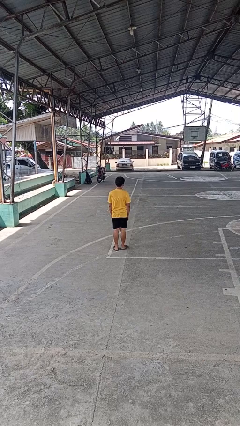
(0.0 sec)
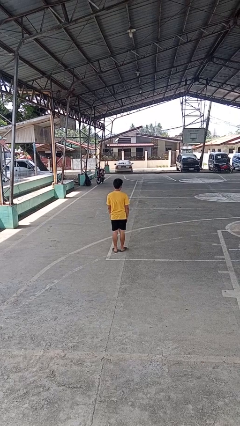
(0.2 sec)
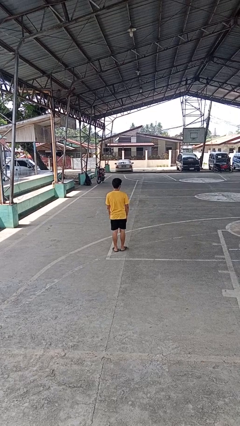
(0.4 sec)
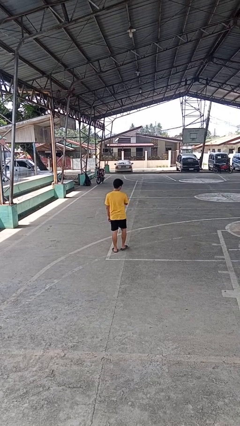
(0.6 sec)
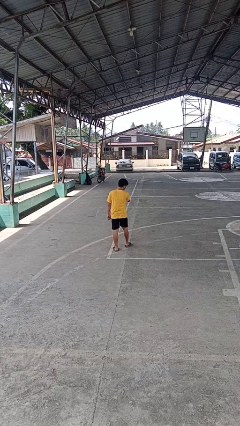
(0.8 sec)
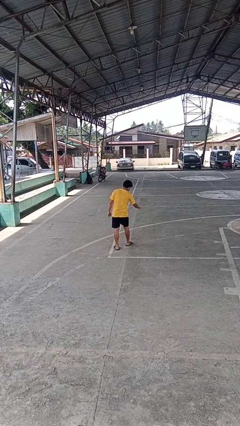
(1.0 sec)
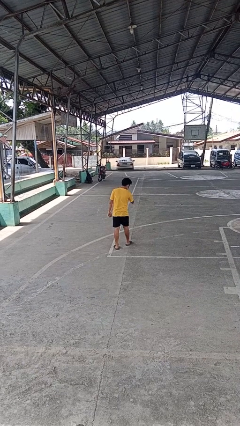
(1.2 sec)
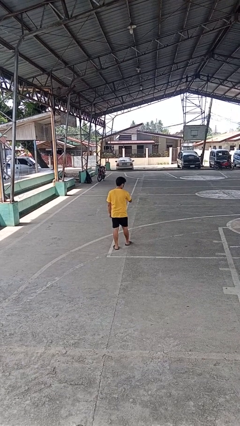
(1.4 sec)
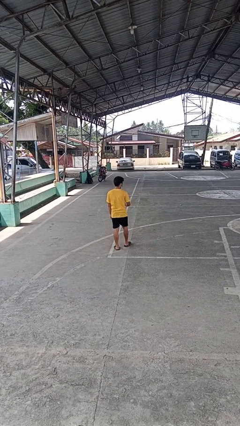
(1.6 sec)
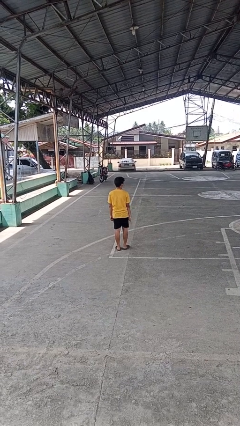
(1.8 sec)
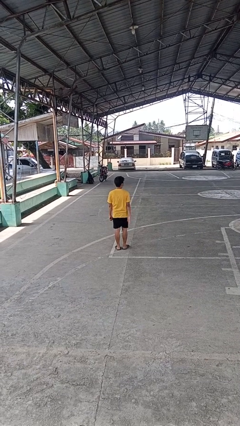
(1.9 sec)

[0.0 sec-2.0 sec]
person karate chop

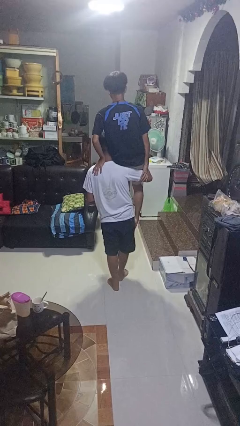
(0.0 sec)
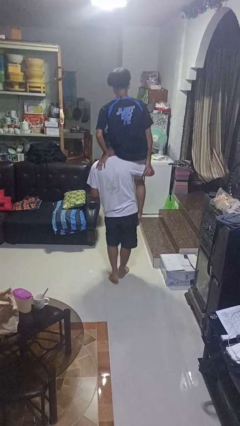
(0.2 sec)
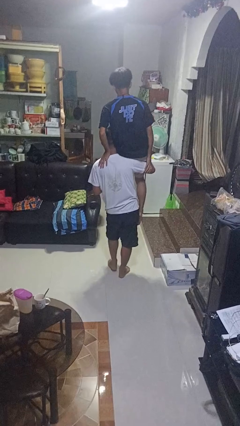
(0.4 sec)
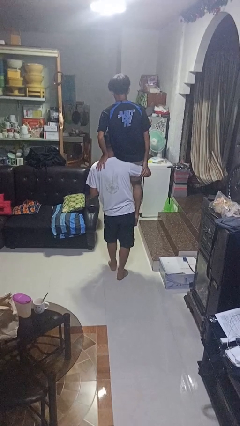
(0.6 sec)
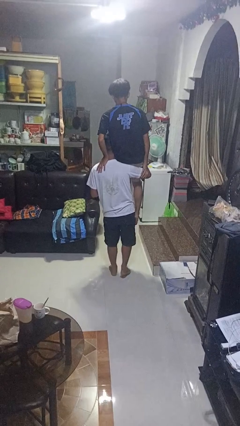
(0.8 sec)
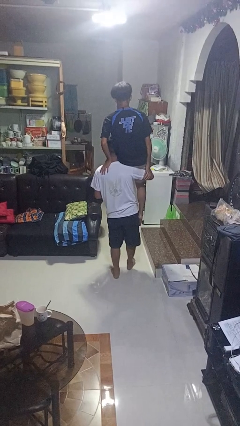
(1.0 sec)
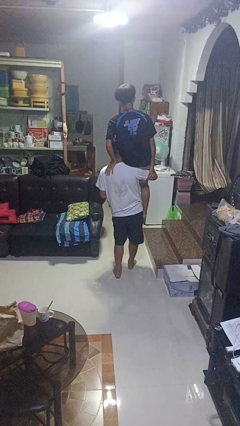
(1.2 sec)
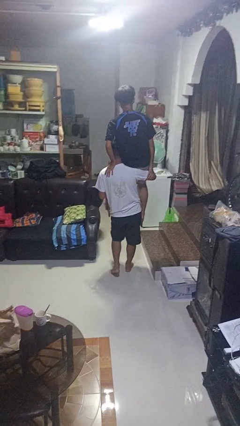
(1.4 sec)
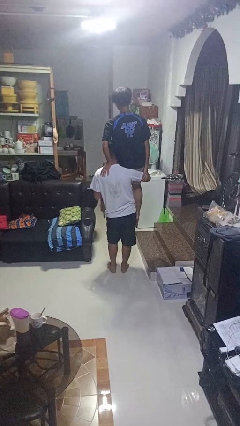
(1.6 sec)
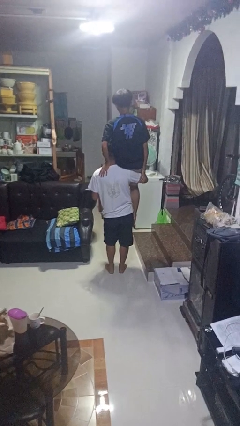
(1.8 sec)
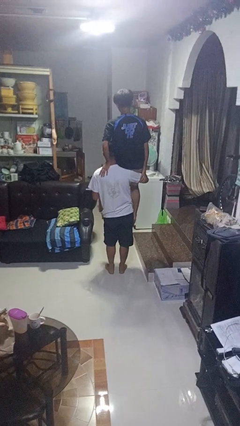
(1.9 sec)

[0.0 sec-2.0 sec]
person carries person on shoulders

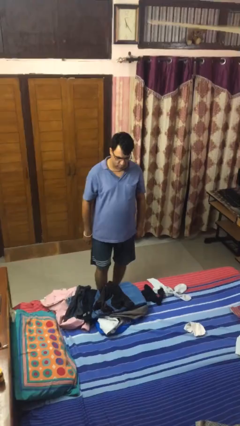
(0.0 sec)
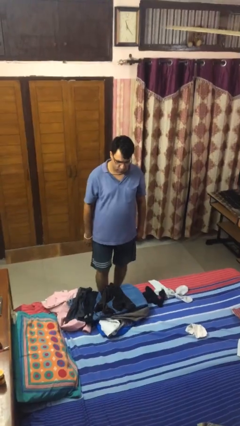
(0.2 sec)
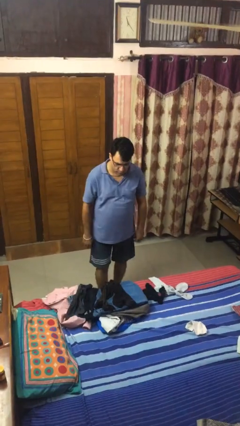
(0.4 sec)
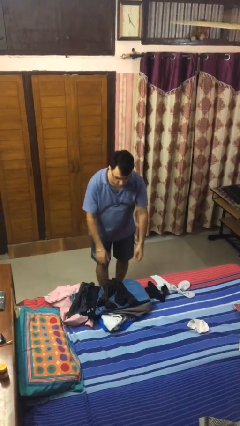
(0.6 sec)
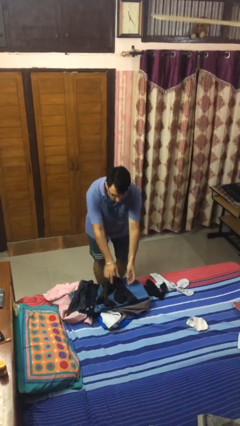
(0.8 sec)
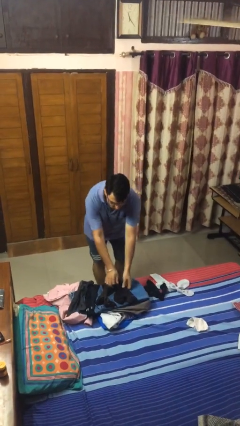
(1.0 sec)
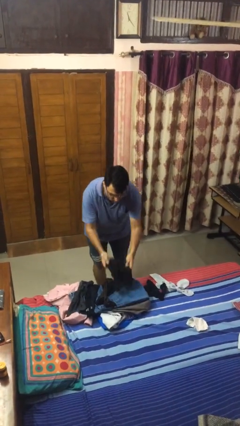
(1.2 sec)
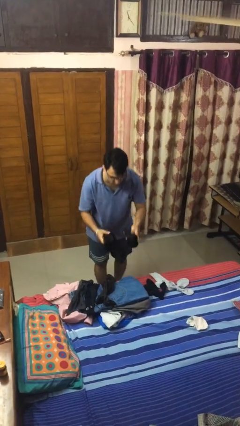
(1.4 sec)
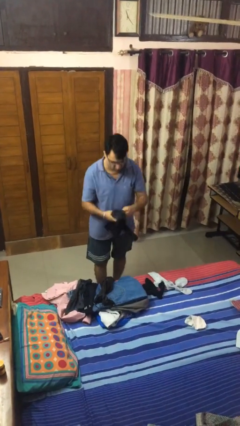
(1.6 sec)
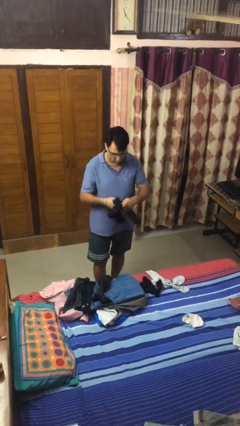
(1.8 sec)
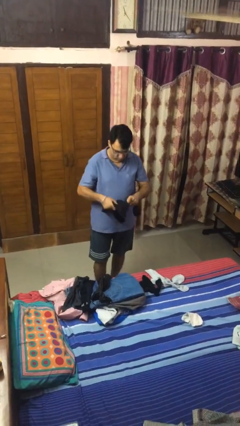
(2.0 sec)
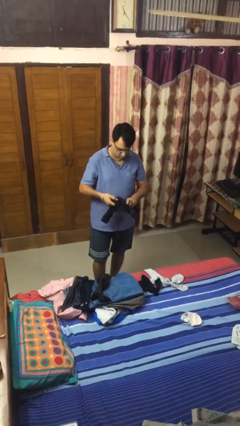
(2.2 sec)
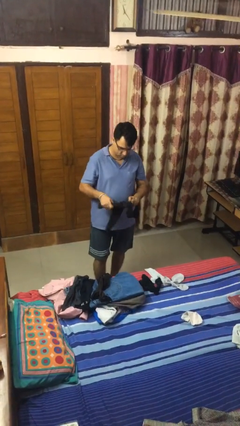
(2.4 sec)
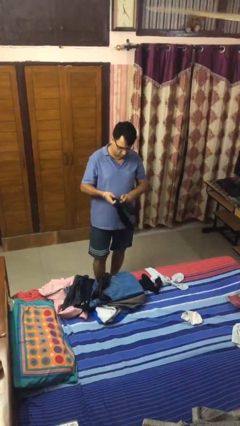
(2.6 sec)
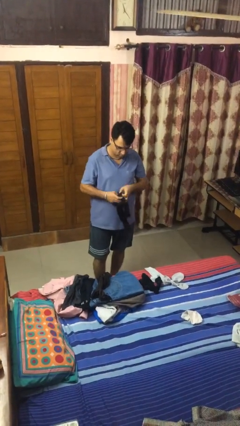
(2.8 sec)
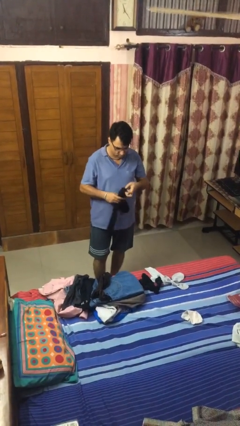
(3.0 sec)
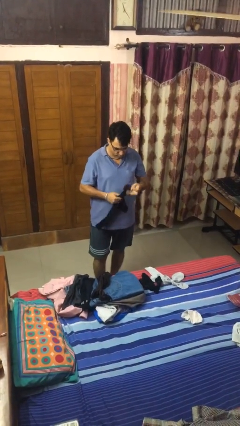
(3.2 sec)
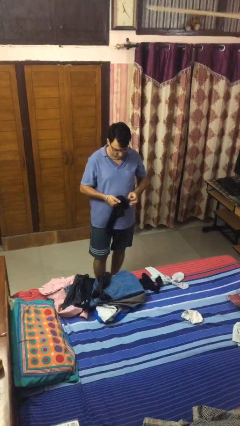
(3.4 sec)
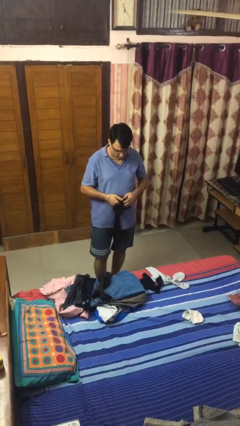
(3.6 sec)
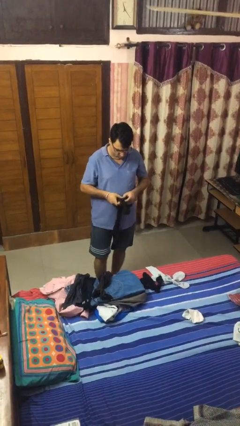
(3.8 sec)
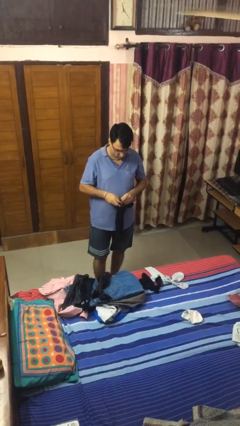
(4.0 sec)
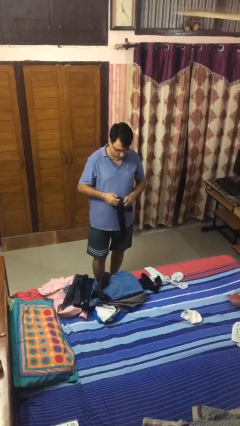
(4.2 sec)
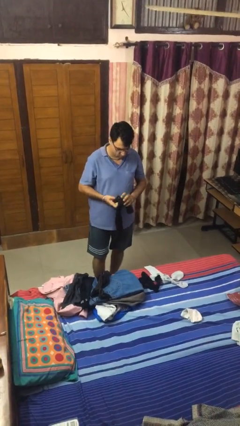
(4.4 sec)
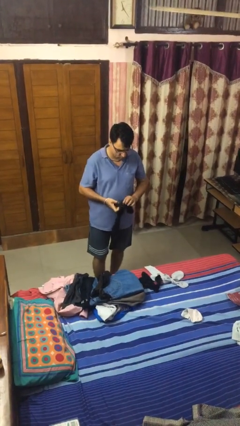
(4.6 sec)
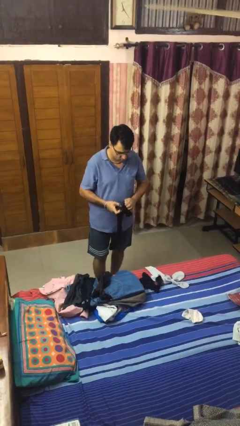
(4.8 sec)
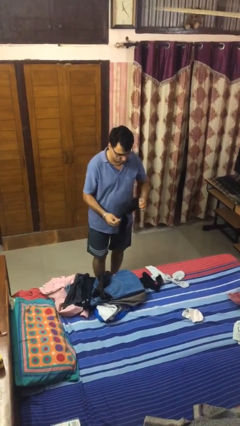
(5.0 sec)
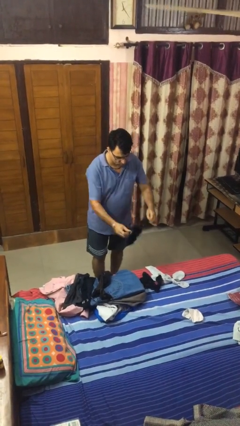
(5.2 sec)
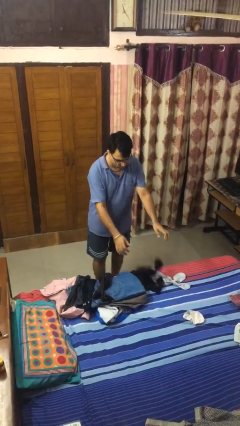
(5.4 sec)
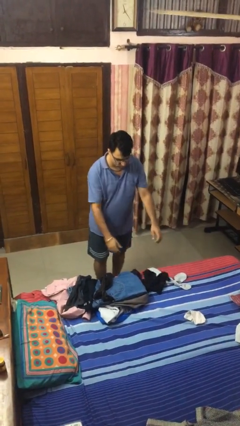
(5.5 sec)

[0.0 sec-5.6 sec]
person folds socks

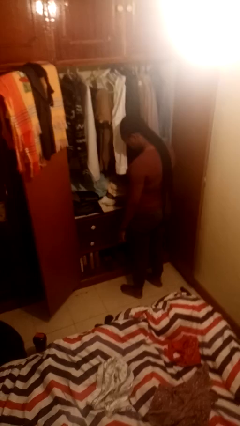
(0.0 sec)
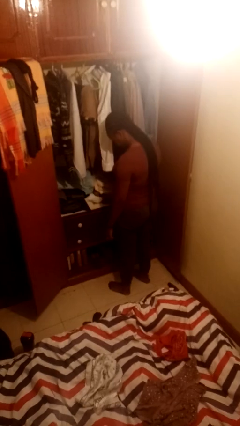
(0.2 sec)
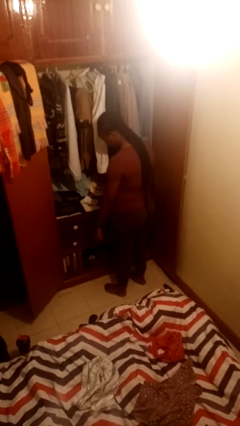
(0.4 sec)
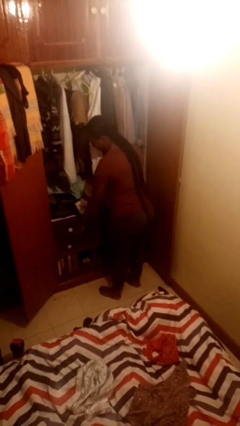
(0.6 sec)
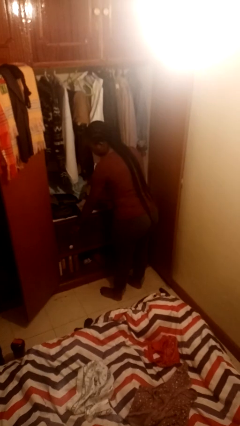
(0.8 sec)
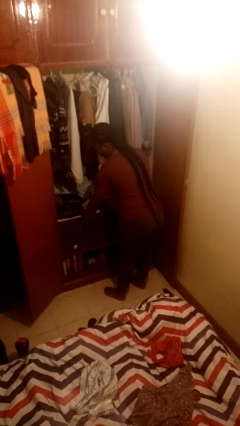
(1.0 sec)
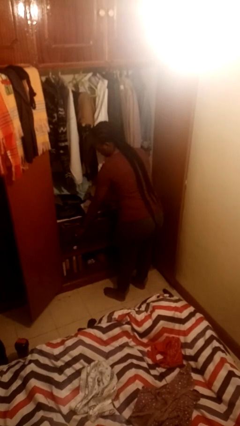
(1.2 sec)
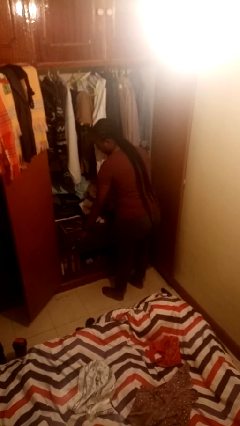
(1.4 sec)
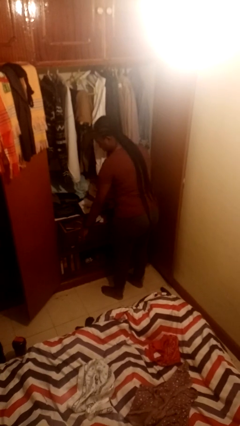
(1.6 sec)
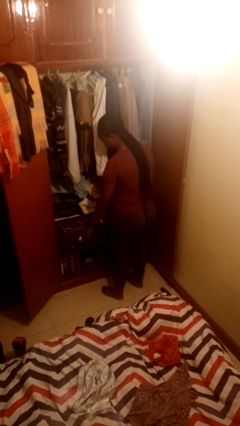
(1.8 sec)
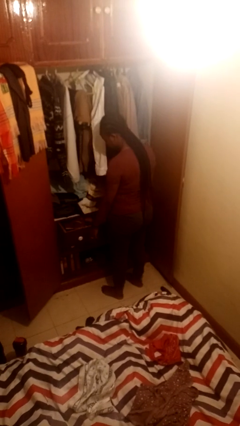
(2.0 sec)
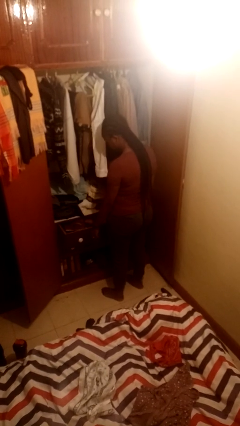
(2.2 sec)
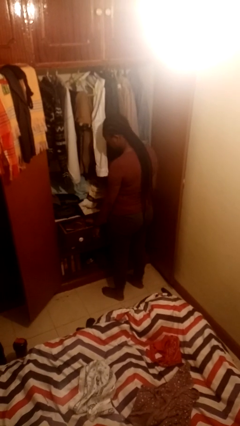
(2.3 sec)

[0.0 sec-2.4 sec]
person opens dresser drawer

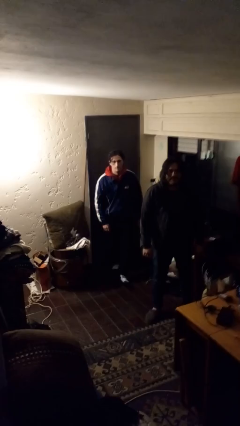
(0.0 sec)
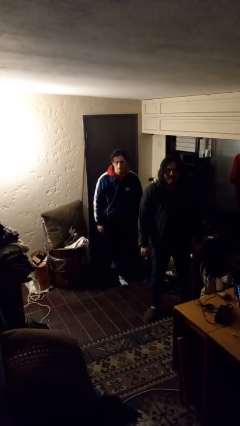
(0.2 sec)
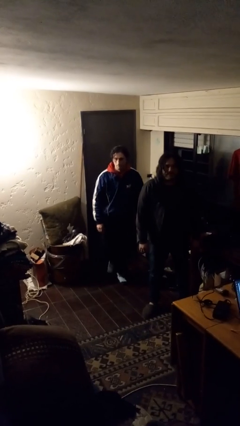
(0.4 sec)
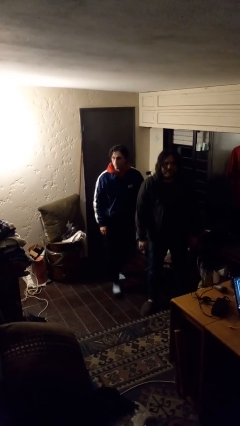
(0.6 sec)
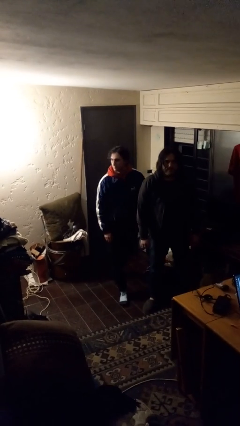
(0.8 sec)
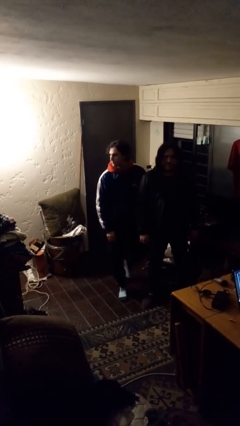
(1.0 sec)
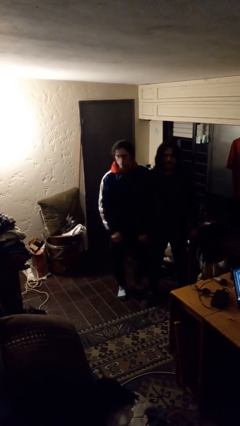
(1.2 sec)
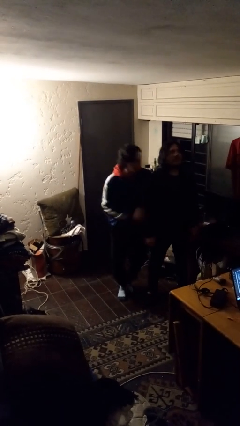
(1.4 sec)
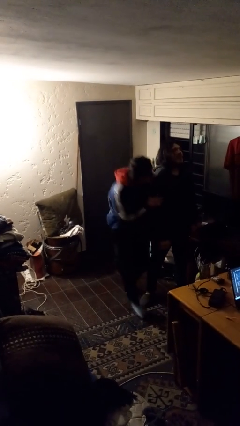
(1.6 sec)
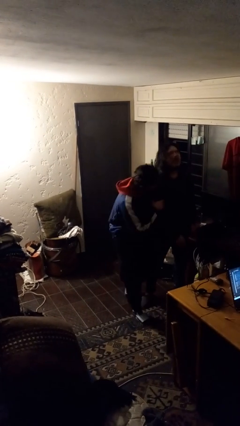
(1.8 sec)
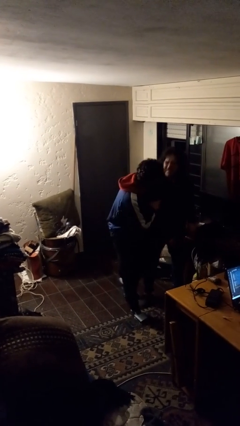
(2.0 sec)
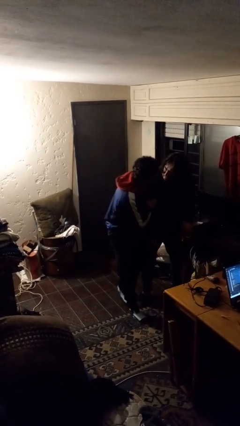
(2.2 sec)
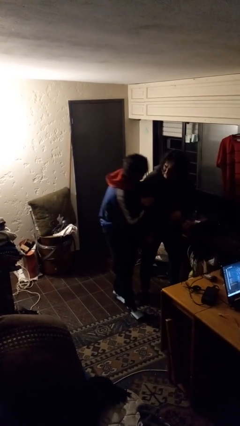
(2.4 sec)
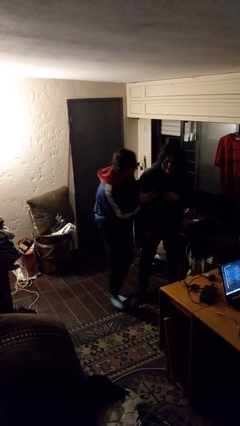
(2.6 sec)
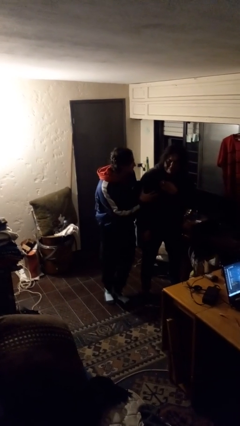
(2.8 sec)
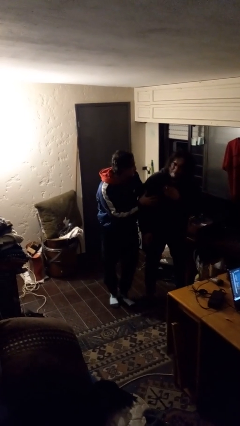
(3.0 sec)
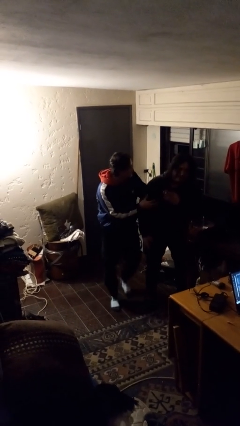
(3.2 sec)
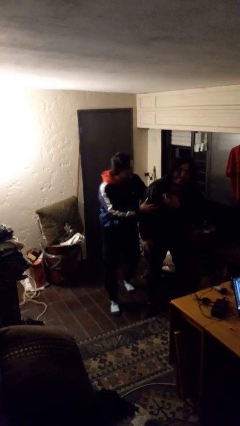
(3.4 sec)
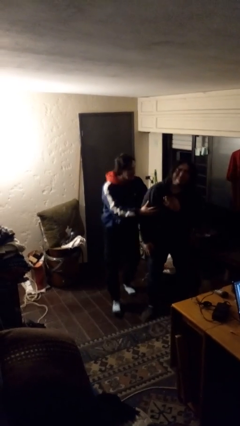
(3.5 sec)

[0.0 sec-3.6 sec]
person bumps into person

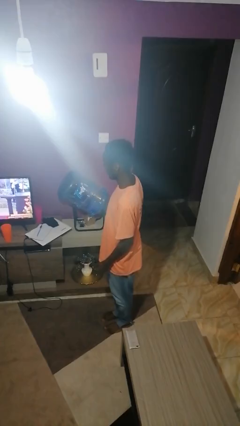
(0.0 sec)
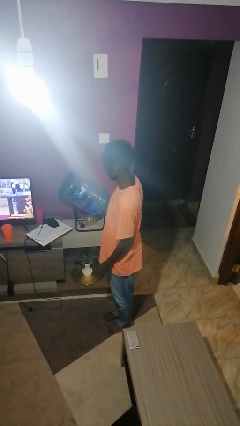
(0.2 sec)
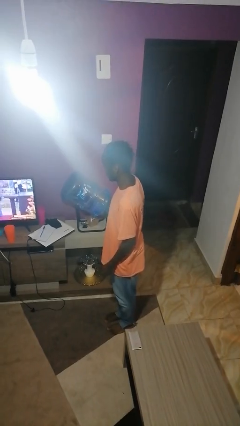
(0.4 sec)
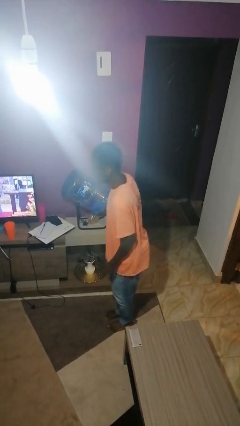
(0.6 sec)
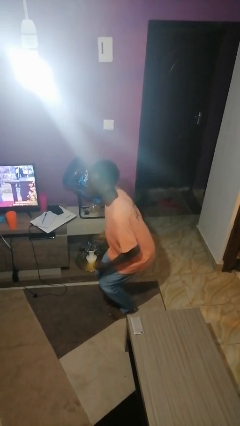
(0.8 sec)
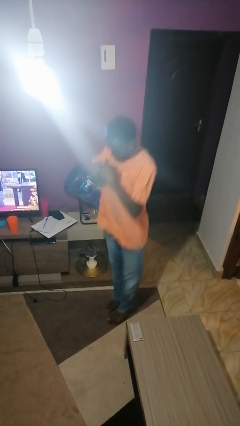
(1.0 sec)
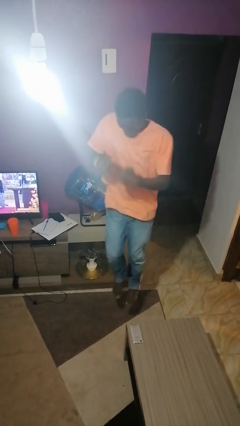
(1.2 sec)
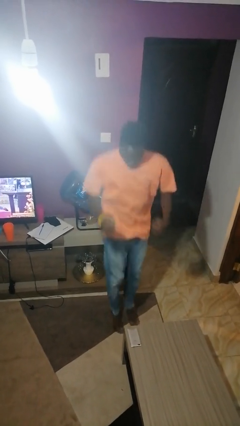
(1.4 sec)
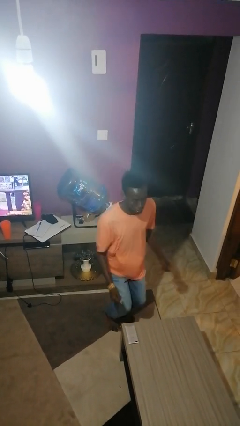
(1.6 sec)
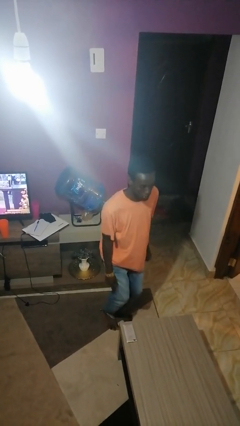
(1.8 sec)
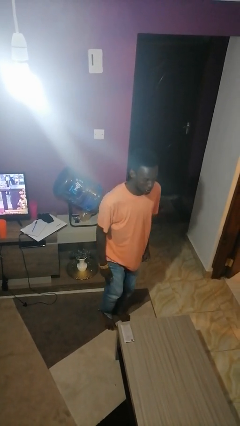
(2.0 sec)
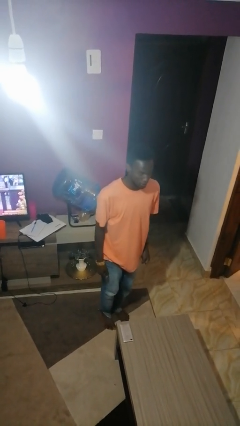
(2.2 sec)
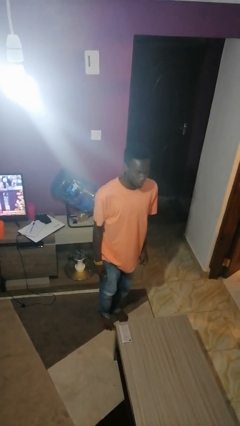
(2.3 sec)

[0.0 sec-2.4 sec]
person jumps
